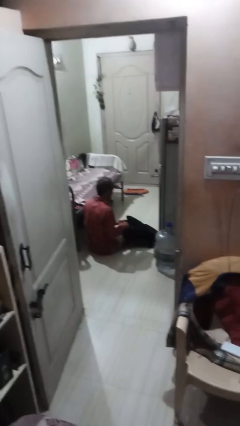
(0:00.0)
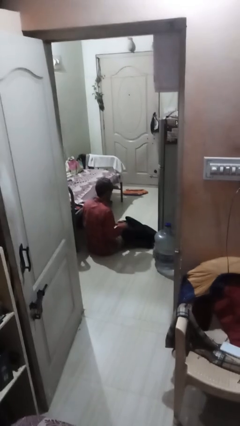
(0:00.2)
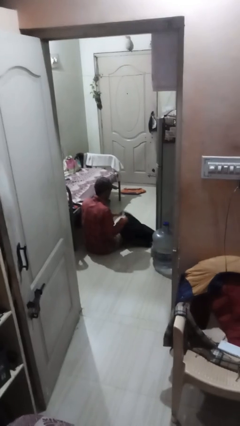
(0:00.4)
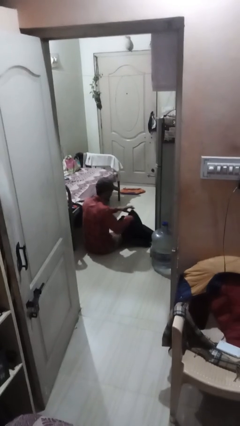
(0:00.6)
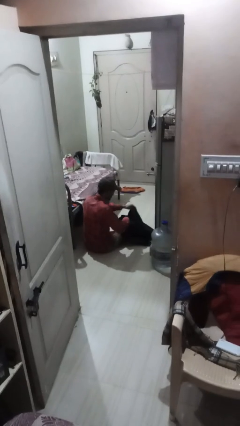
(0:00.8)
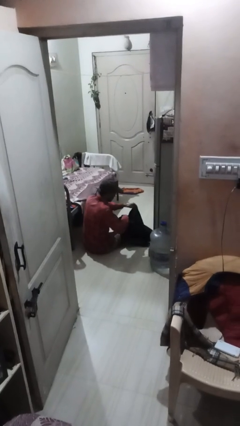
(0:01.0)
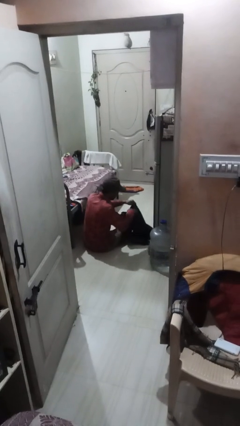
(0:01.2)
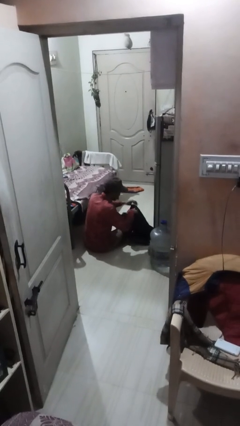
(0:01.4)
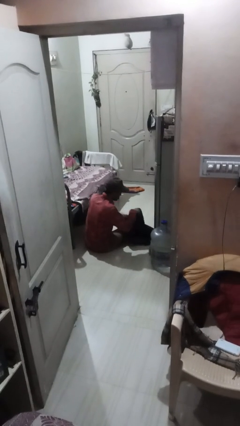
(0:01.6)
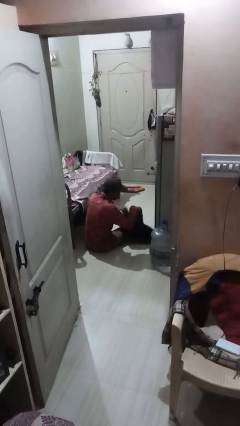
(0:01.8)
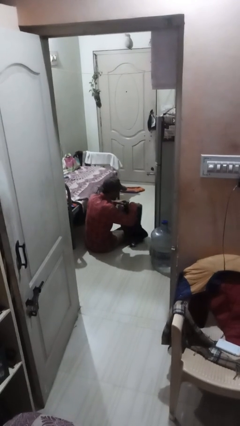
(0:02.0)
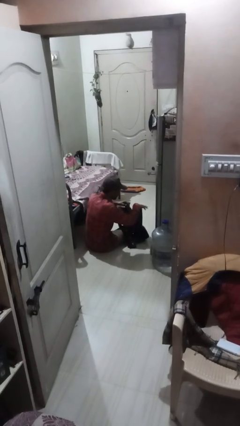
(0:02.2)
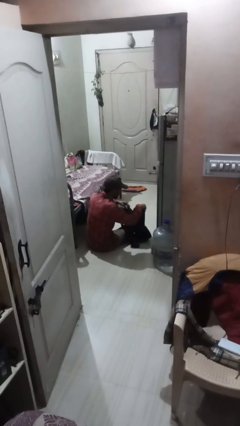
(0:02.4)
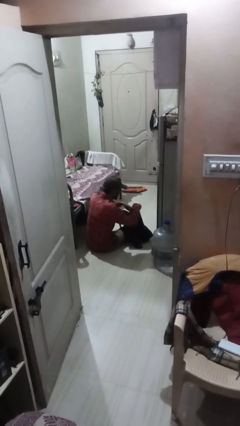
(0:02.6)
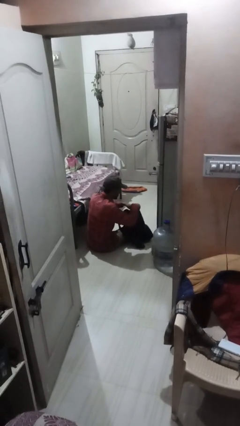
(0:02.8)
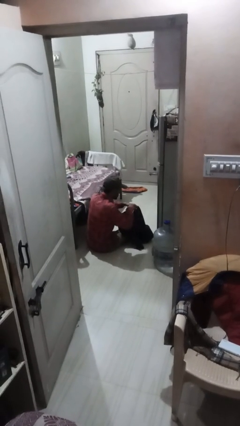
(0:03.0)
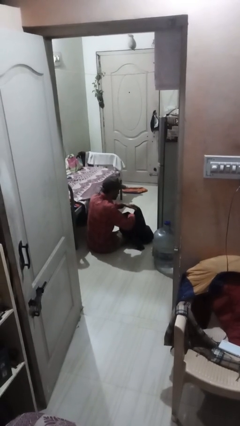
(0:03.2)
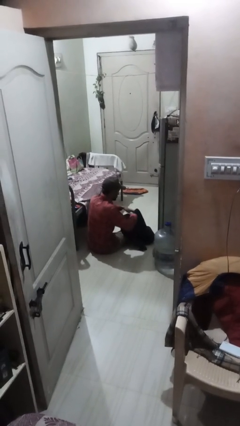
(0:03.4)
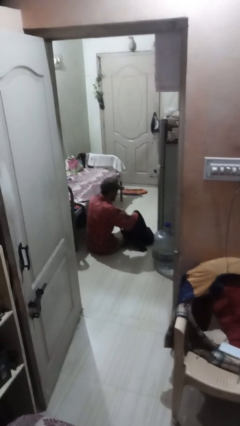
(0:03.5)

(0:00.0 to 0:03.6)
person searches in backpack

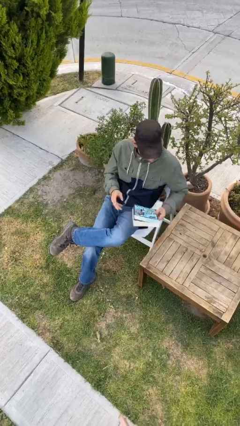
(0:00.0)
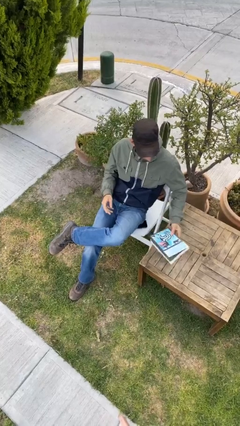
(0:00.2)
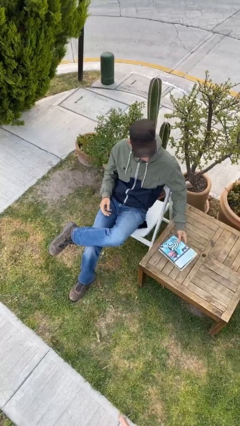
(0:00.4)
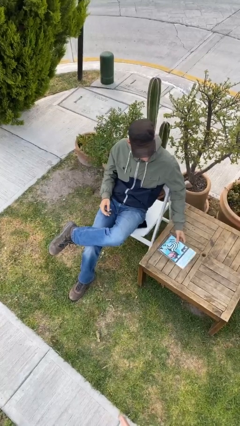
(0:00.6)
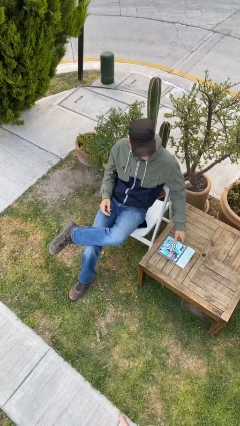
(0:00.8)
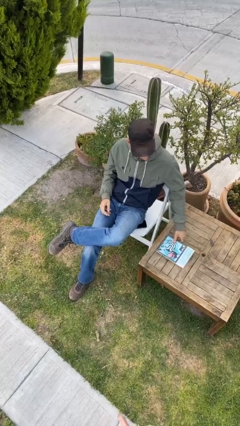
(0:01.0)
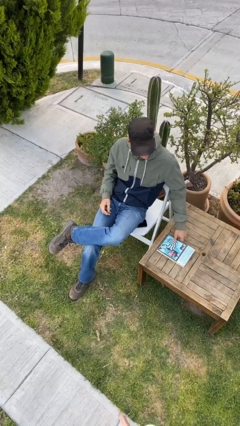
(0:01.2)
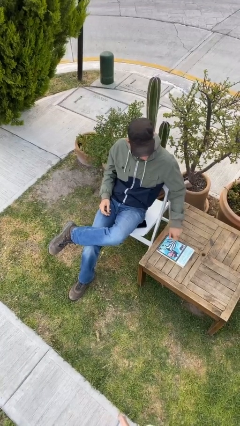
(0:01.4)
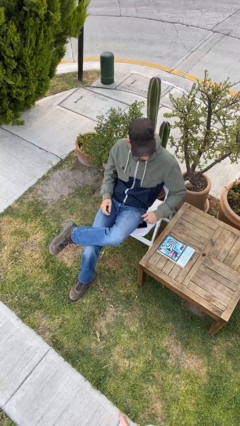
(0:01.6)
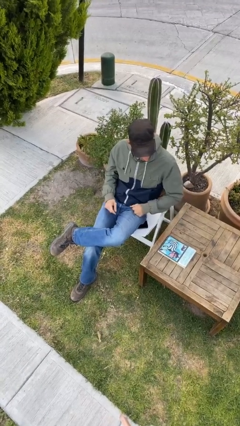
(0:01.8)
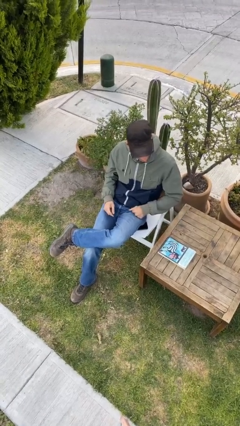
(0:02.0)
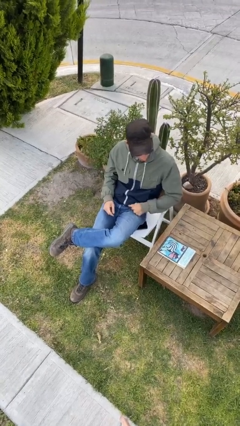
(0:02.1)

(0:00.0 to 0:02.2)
person puts down object on table

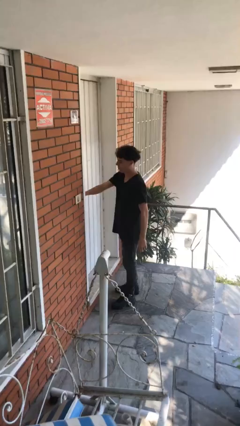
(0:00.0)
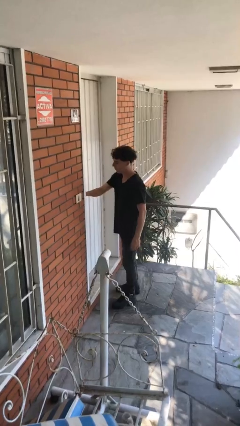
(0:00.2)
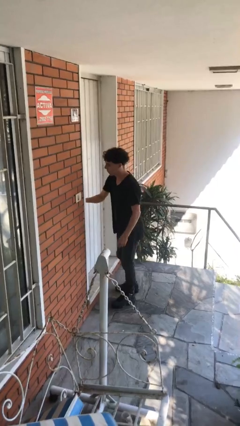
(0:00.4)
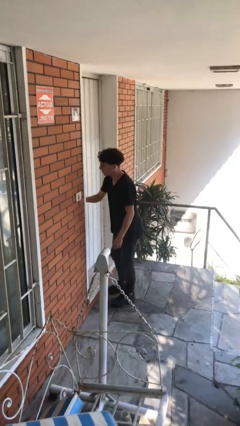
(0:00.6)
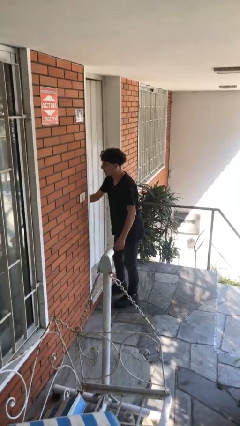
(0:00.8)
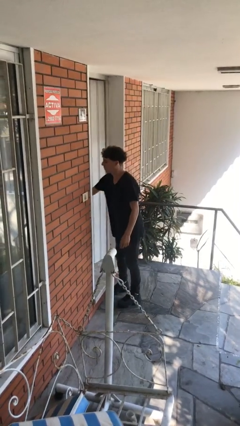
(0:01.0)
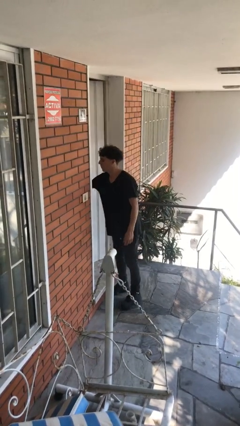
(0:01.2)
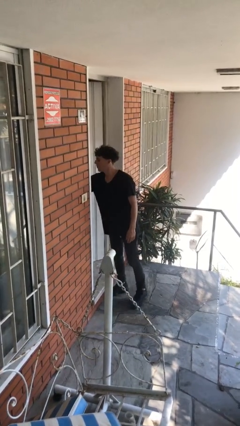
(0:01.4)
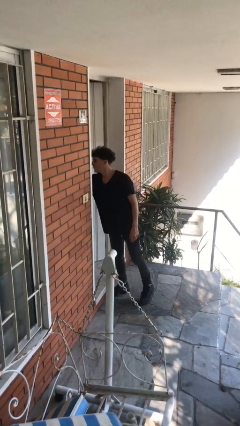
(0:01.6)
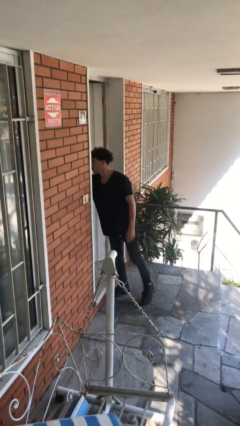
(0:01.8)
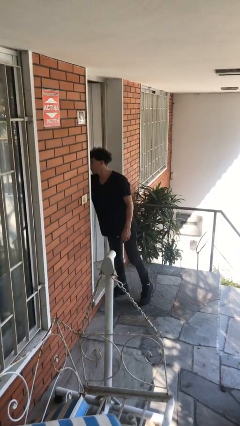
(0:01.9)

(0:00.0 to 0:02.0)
person opens facility door

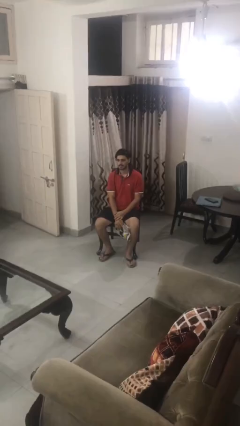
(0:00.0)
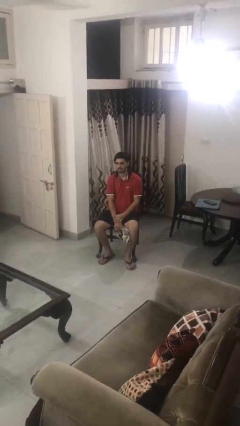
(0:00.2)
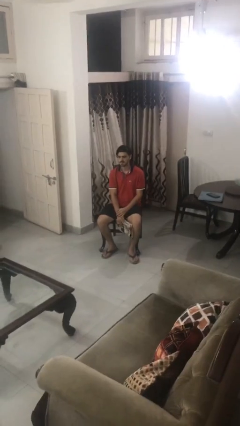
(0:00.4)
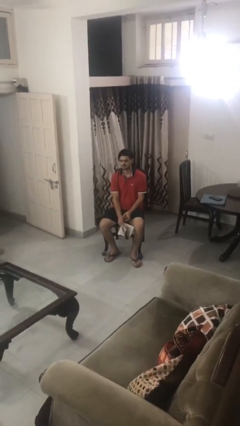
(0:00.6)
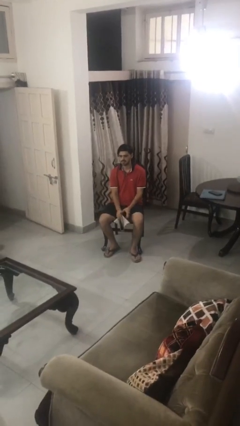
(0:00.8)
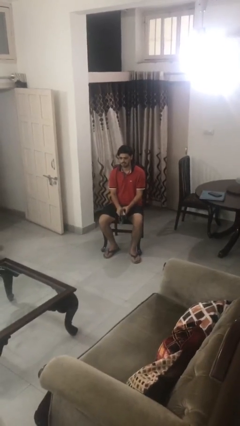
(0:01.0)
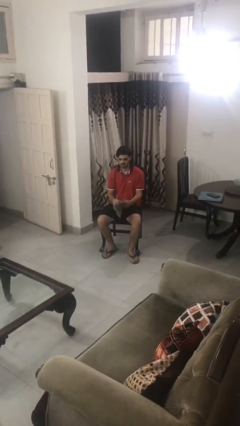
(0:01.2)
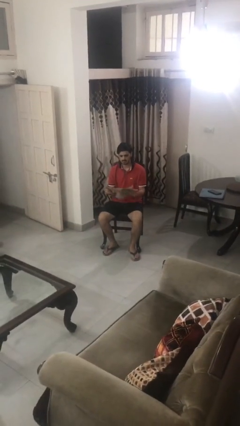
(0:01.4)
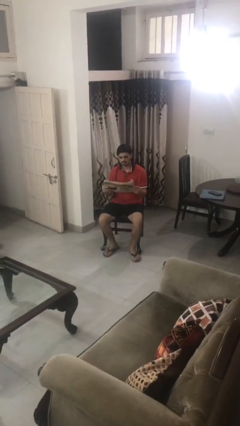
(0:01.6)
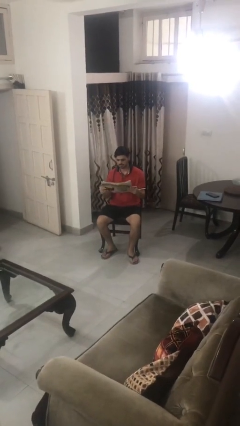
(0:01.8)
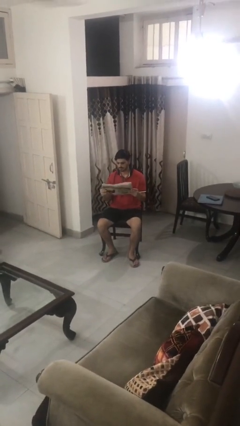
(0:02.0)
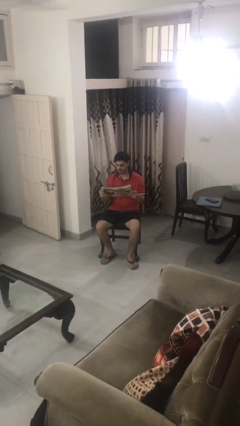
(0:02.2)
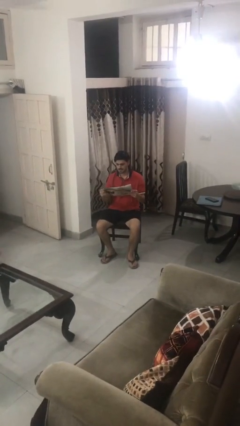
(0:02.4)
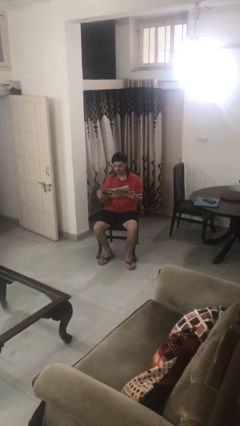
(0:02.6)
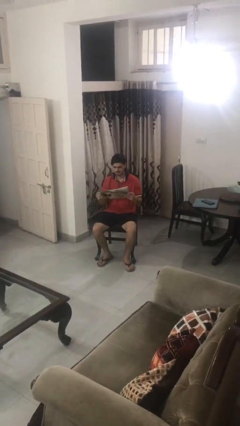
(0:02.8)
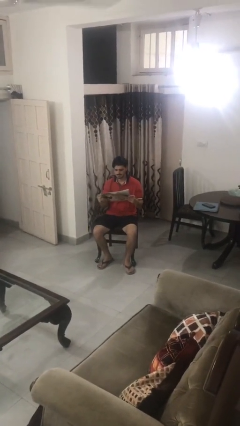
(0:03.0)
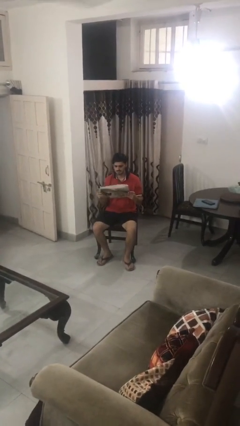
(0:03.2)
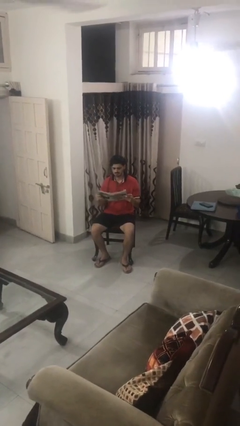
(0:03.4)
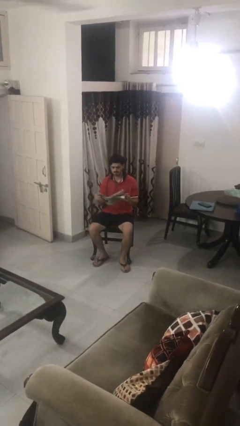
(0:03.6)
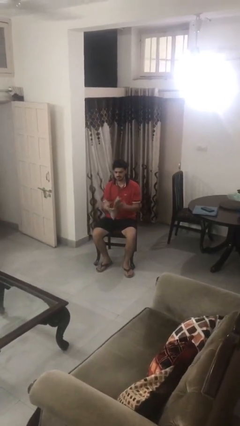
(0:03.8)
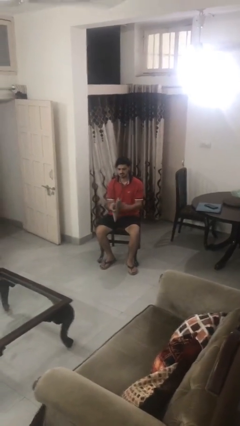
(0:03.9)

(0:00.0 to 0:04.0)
person reads newspaper

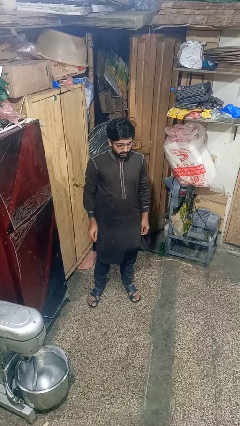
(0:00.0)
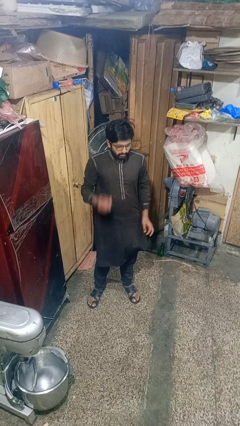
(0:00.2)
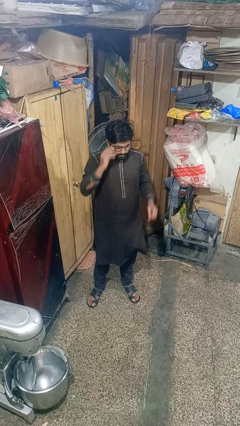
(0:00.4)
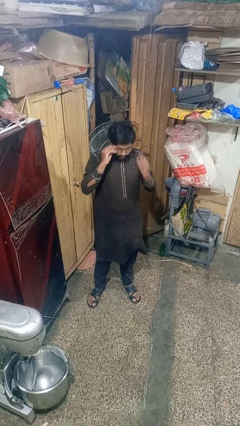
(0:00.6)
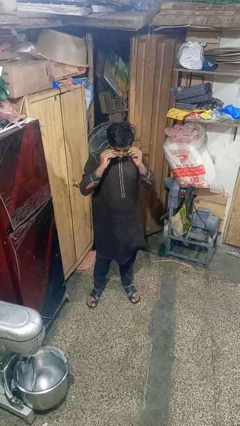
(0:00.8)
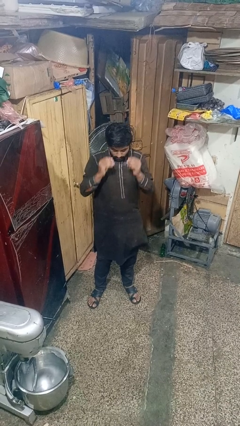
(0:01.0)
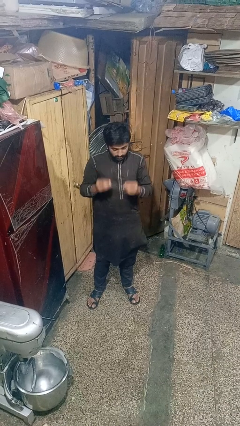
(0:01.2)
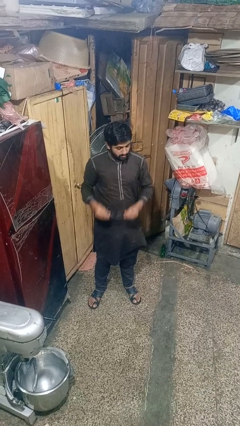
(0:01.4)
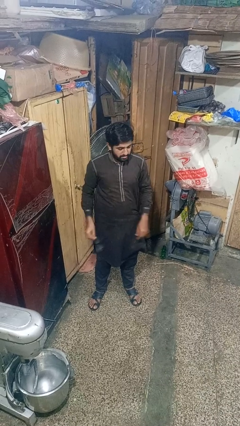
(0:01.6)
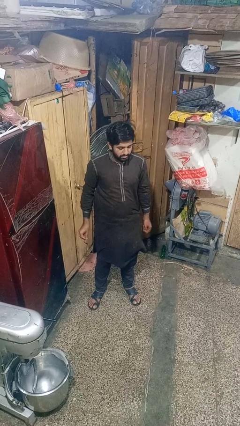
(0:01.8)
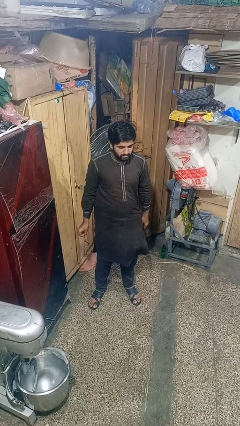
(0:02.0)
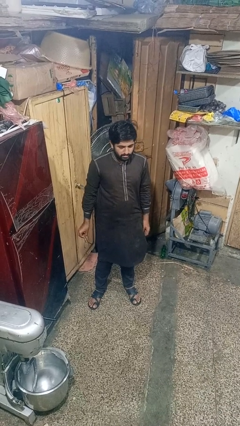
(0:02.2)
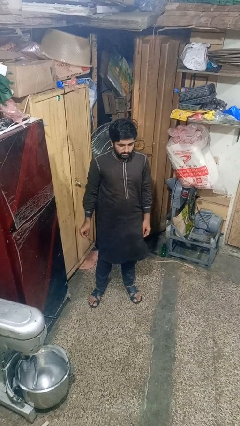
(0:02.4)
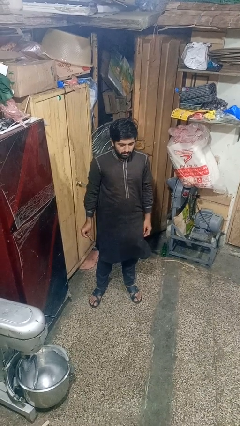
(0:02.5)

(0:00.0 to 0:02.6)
person takes off glasses

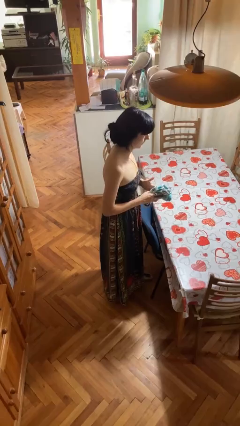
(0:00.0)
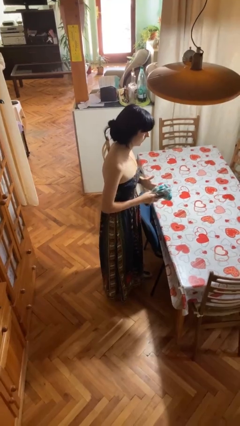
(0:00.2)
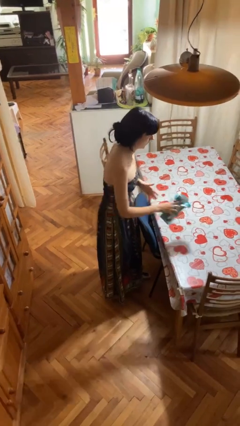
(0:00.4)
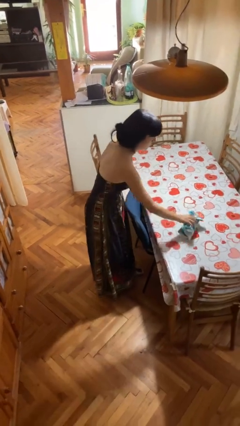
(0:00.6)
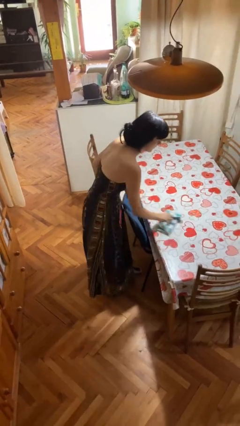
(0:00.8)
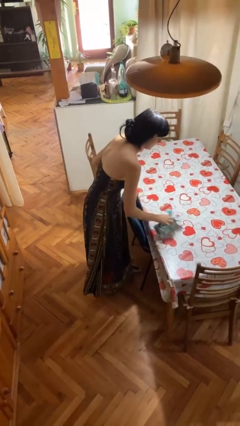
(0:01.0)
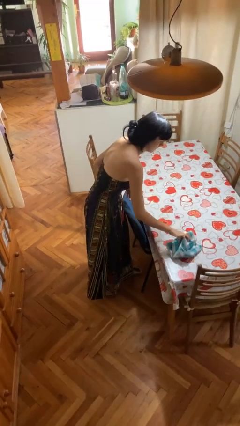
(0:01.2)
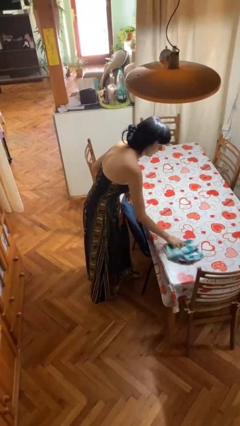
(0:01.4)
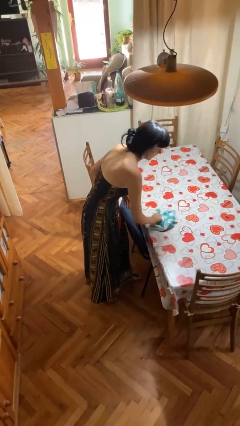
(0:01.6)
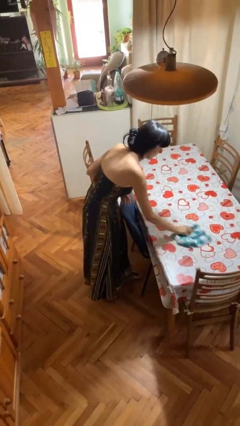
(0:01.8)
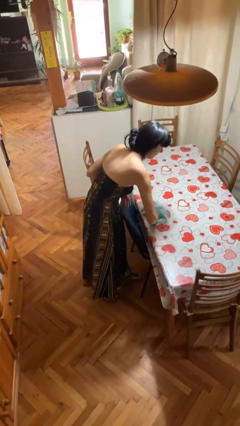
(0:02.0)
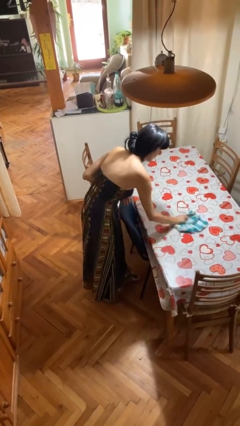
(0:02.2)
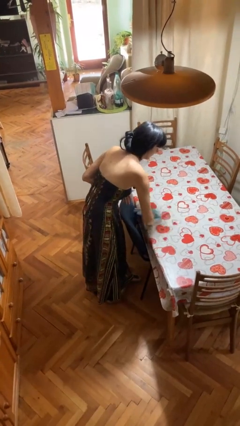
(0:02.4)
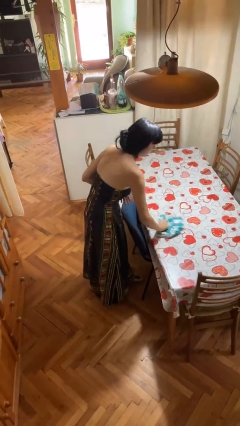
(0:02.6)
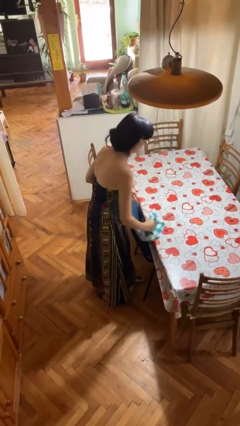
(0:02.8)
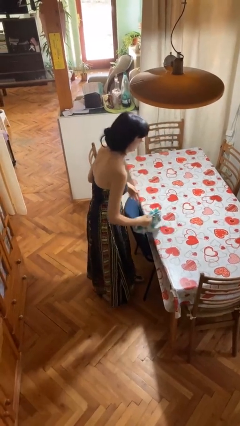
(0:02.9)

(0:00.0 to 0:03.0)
person cleans table with rag
